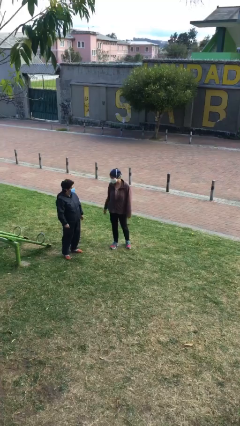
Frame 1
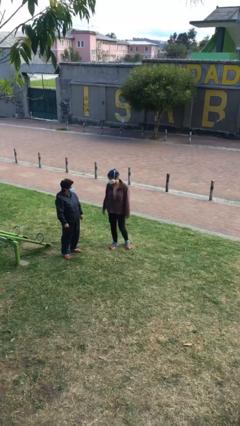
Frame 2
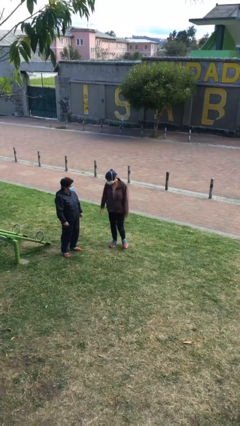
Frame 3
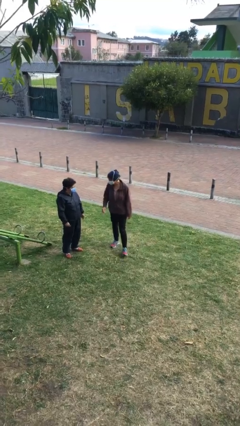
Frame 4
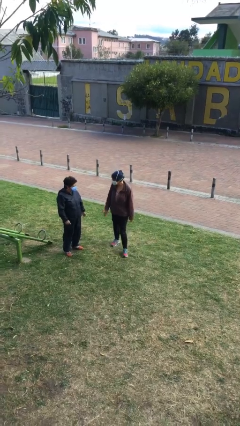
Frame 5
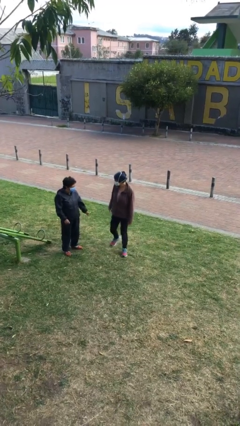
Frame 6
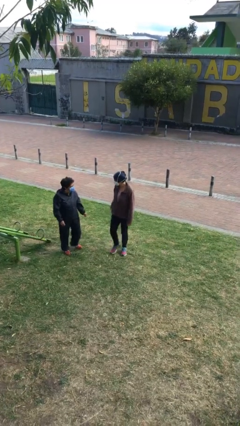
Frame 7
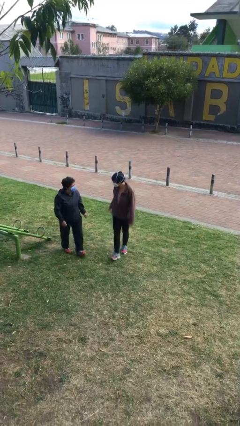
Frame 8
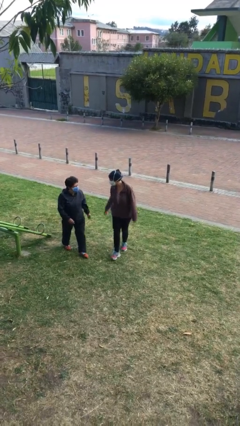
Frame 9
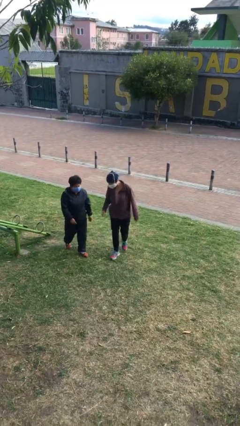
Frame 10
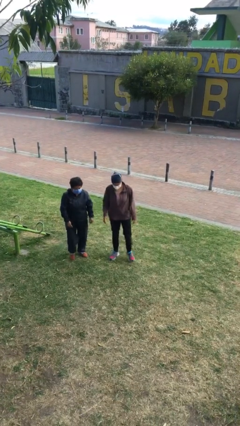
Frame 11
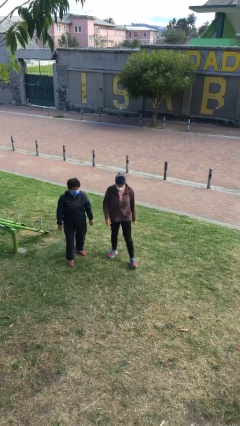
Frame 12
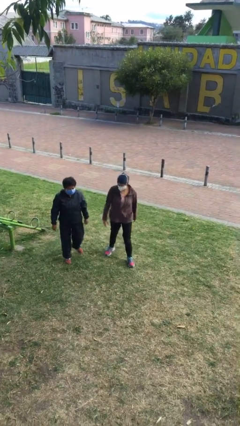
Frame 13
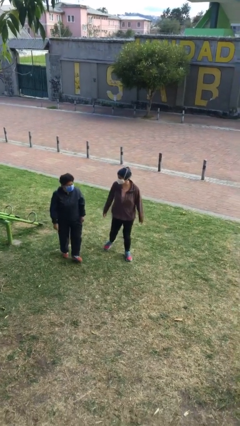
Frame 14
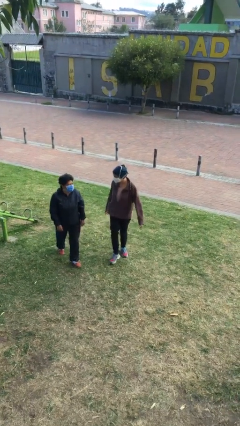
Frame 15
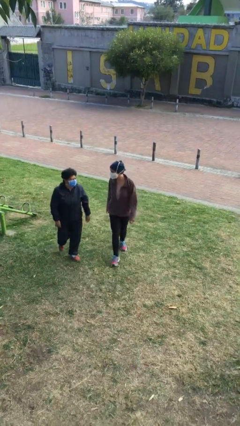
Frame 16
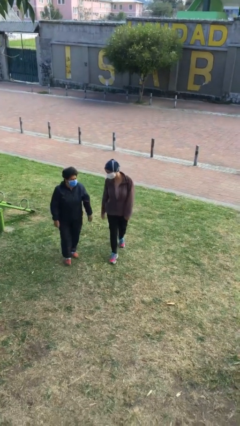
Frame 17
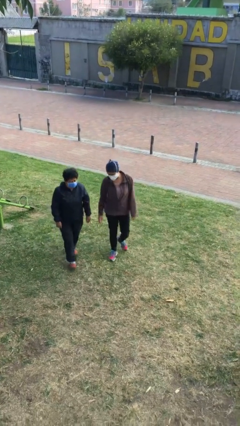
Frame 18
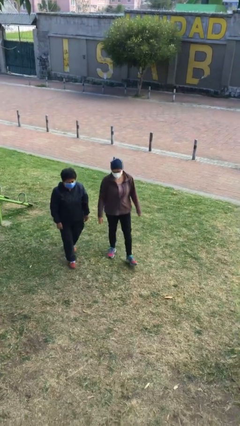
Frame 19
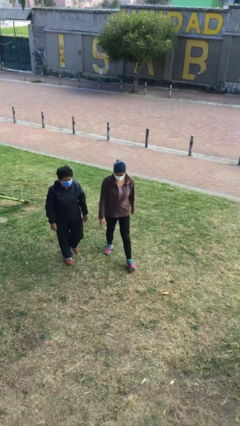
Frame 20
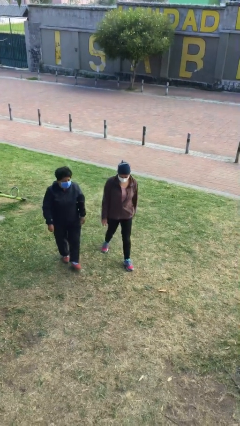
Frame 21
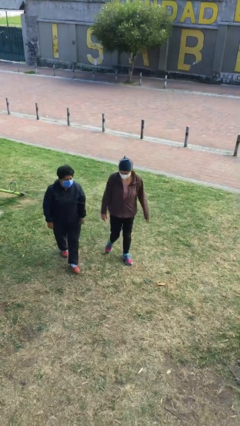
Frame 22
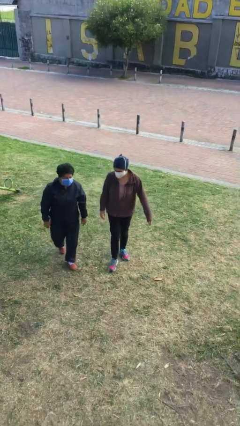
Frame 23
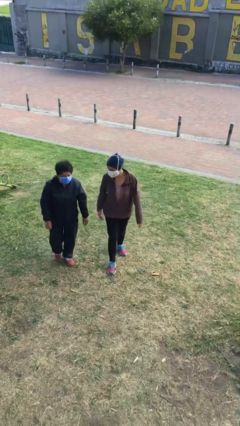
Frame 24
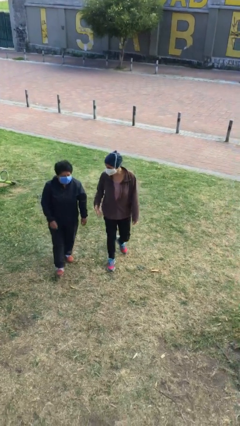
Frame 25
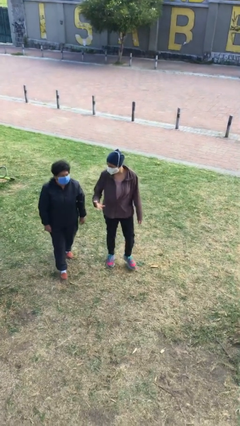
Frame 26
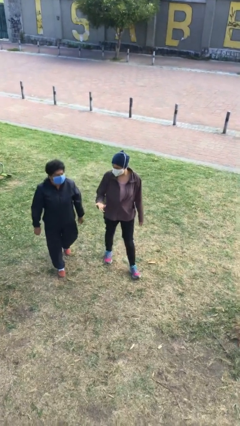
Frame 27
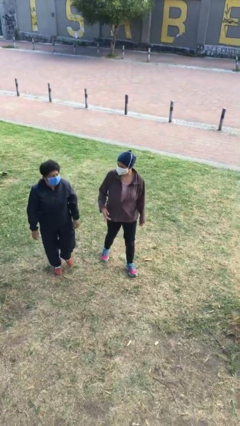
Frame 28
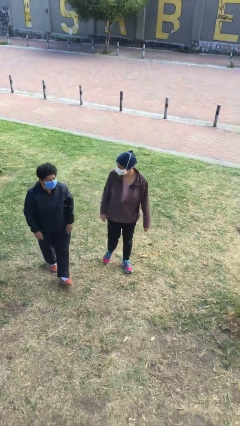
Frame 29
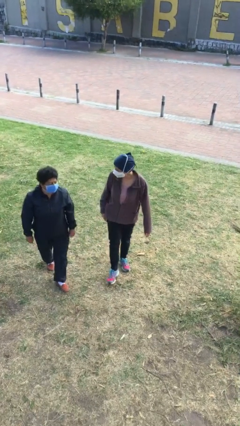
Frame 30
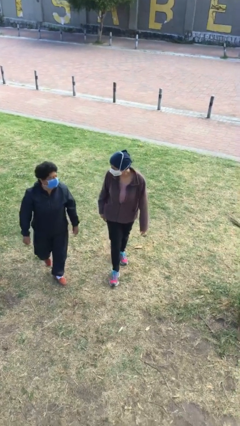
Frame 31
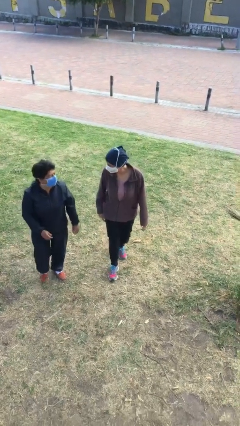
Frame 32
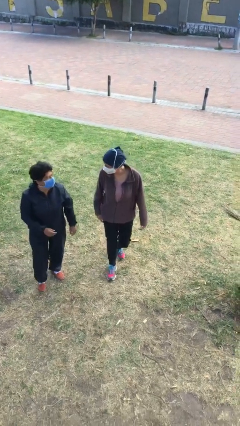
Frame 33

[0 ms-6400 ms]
person talks to person

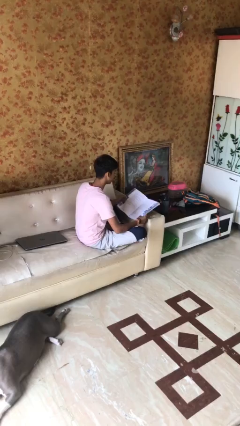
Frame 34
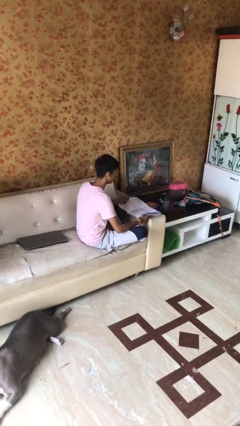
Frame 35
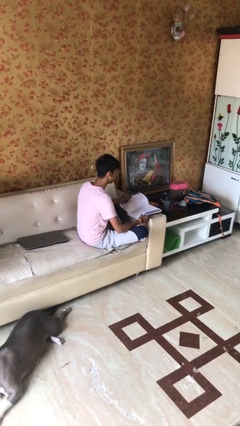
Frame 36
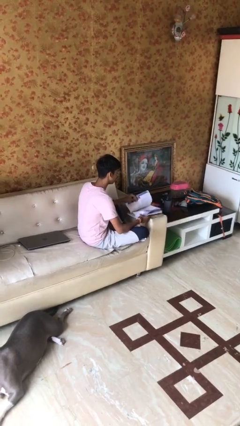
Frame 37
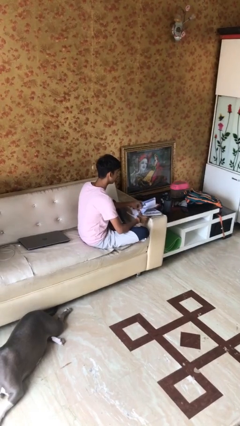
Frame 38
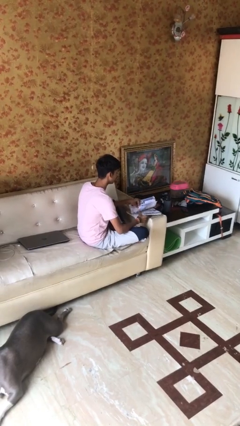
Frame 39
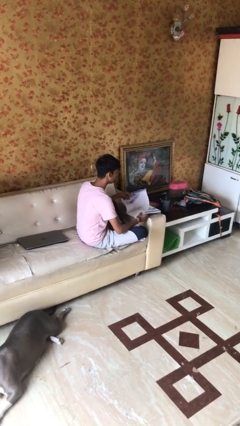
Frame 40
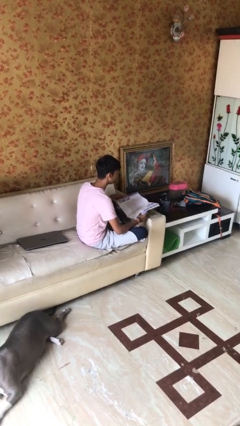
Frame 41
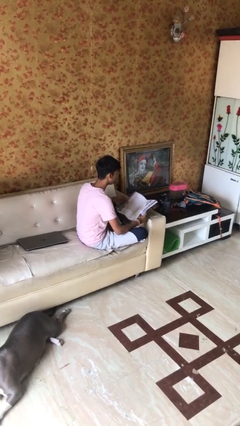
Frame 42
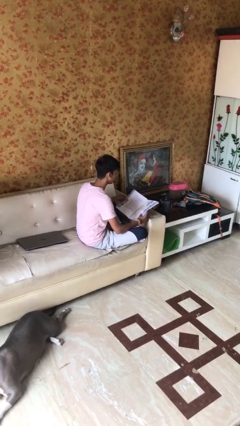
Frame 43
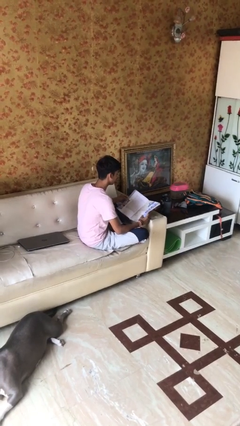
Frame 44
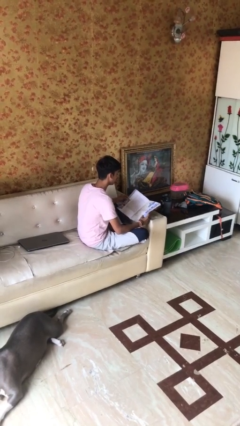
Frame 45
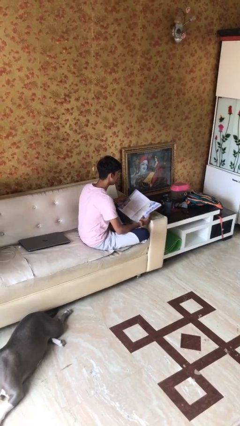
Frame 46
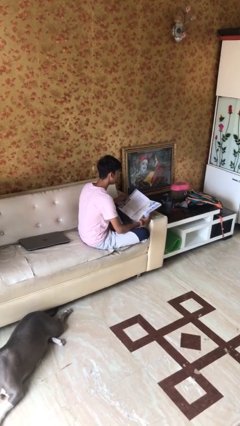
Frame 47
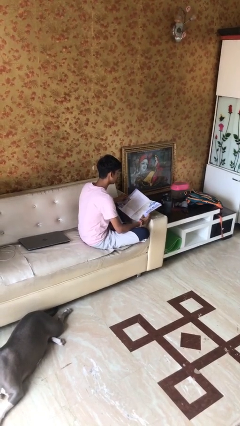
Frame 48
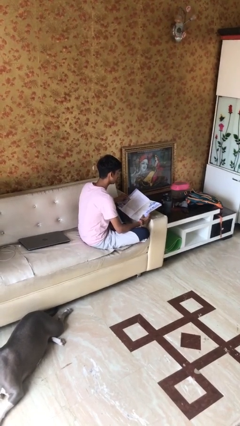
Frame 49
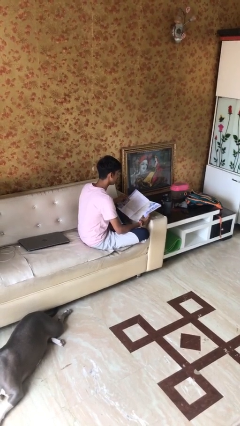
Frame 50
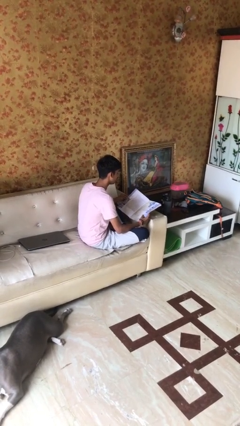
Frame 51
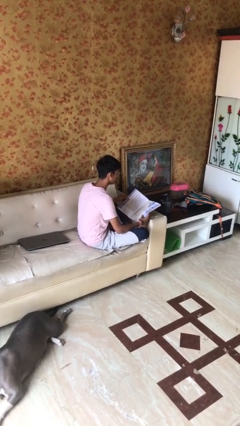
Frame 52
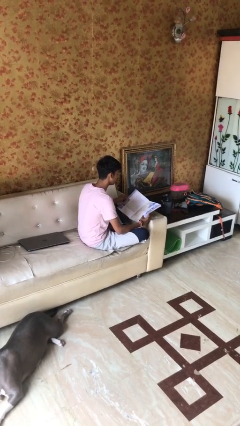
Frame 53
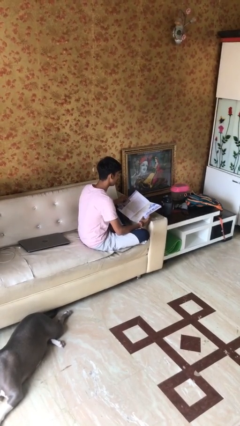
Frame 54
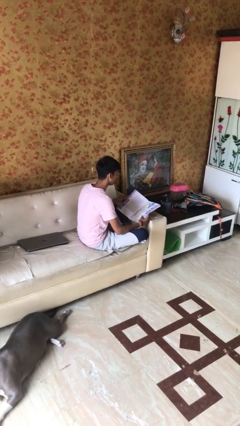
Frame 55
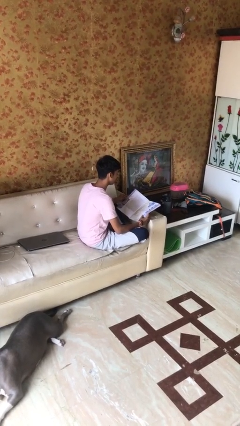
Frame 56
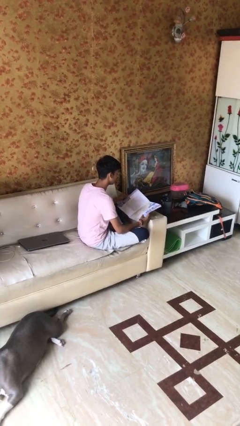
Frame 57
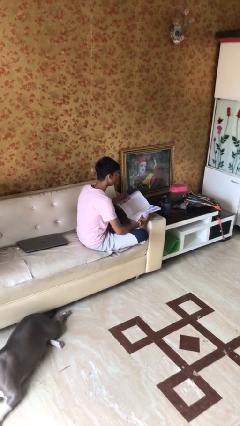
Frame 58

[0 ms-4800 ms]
person reads magazine

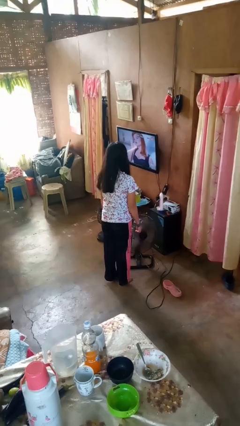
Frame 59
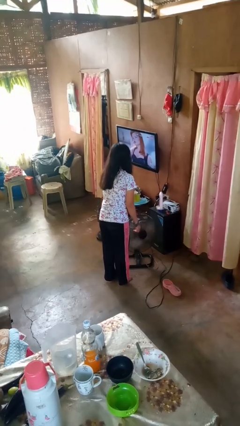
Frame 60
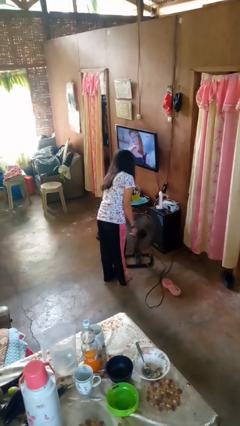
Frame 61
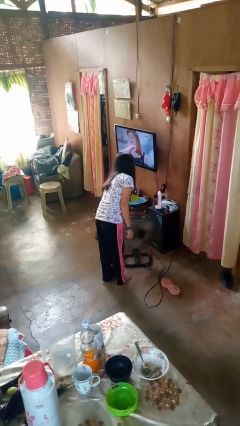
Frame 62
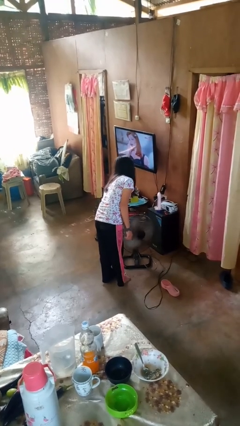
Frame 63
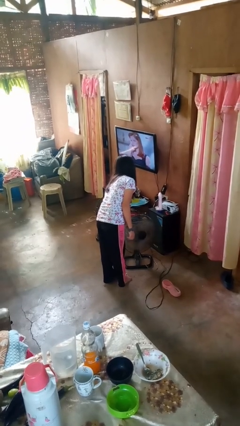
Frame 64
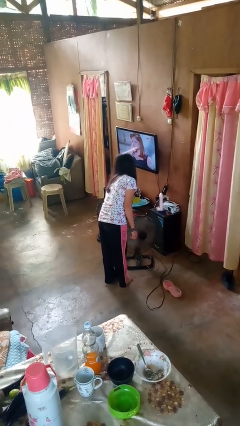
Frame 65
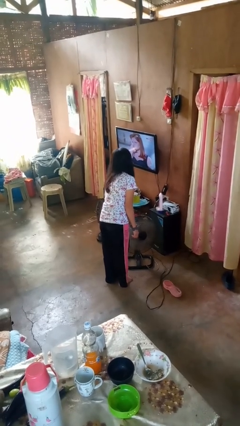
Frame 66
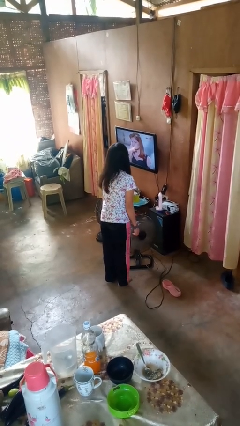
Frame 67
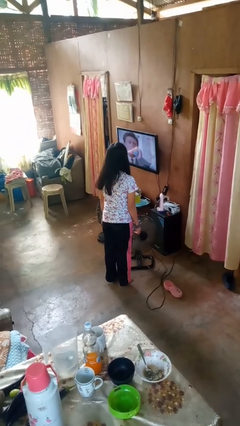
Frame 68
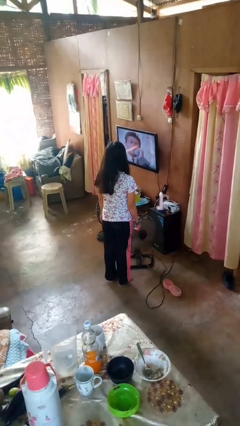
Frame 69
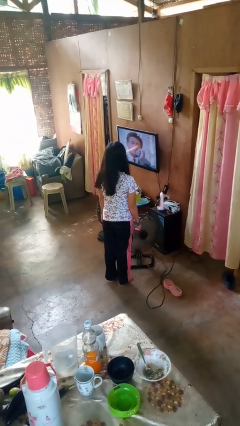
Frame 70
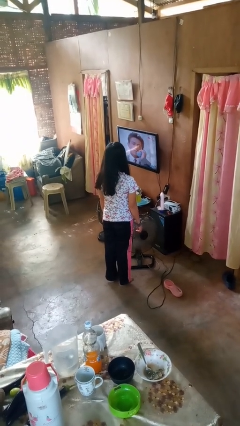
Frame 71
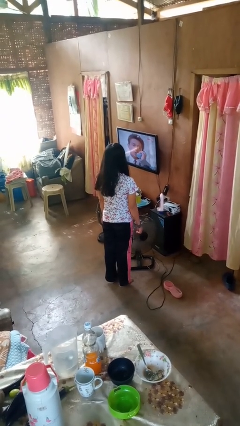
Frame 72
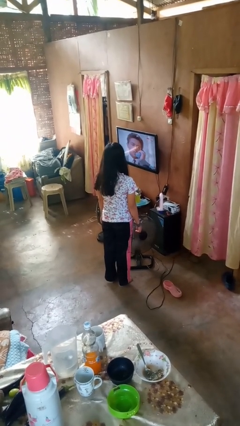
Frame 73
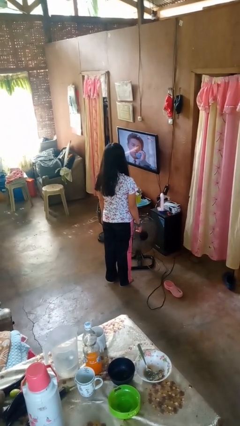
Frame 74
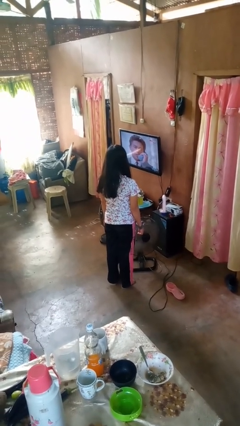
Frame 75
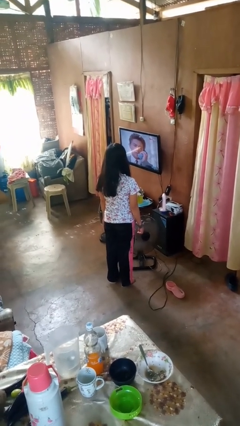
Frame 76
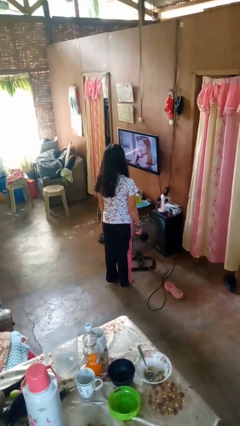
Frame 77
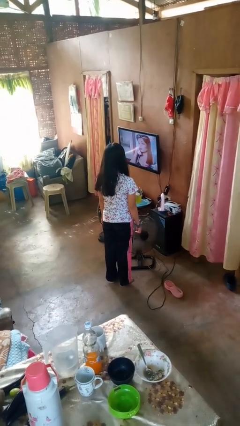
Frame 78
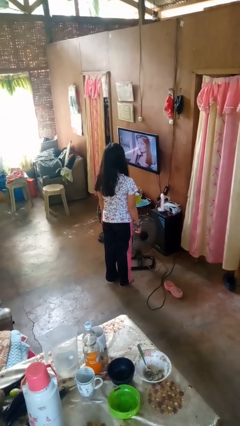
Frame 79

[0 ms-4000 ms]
person turns on fan

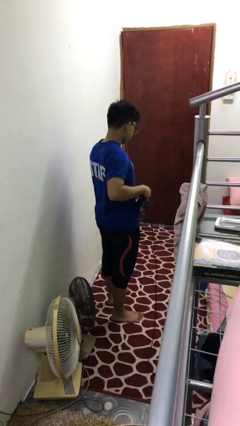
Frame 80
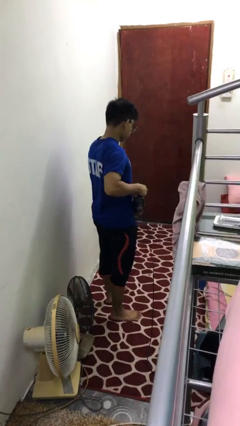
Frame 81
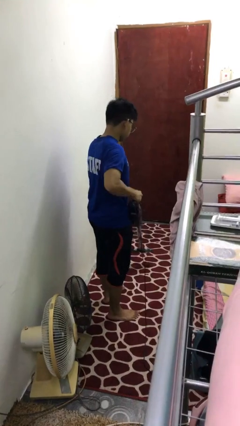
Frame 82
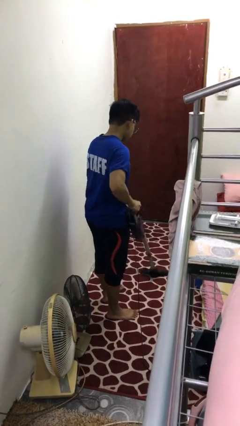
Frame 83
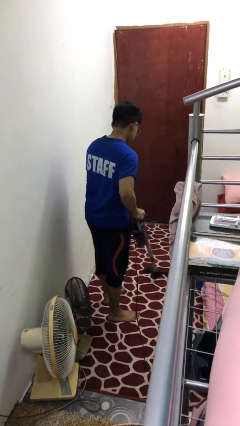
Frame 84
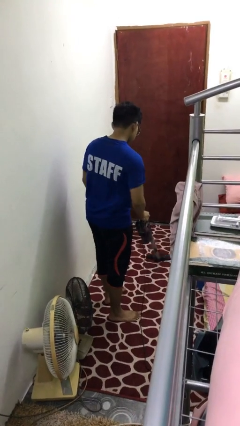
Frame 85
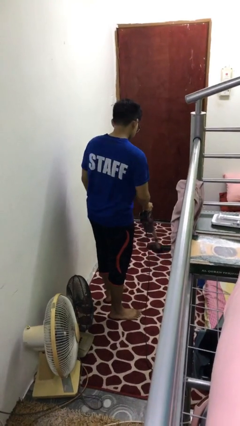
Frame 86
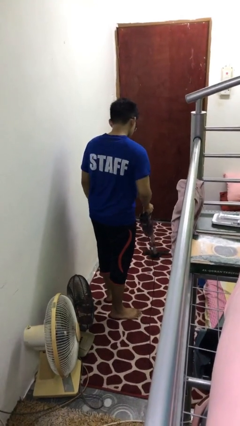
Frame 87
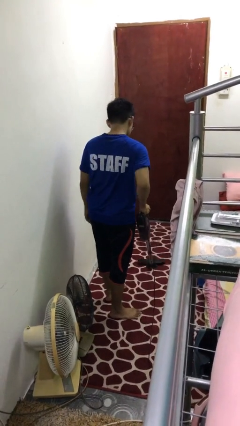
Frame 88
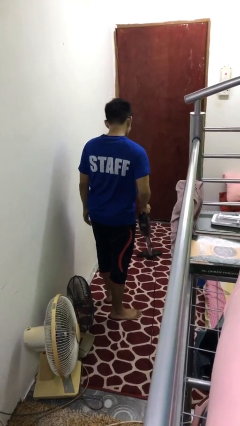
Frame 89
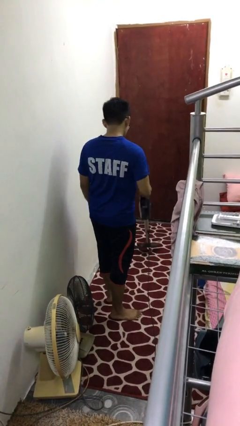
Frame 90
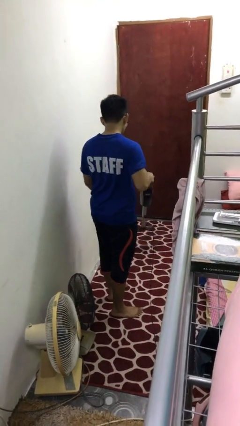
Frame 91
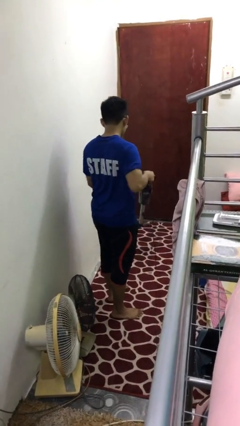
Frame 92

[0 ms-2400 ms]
person vacuums carpet

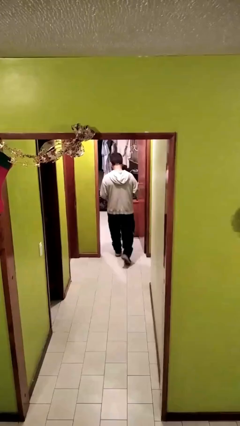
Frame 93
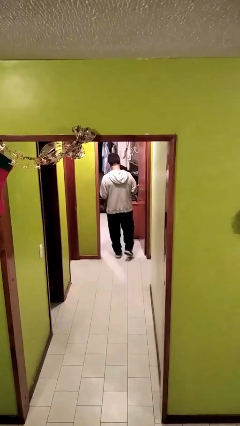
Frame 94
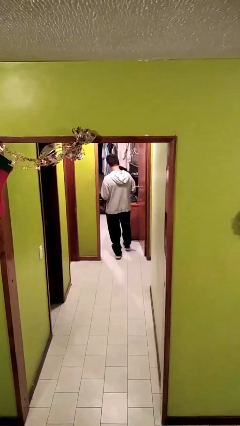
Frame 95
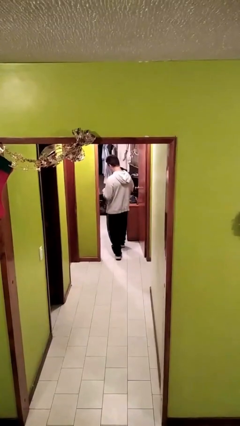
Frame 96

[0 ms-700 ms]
person exits scene through structure
